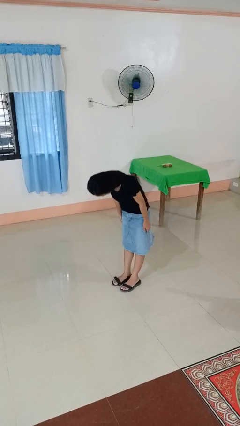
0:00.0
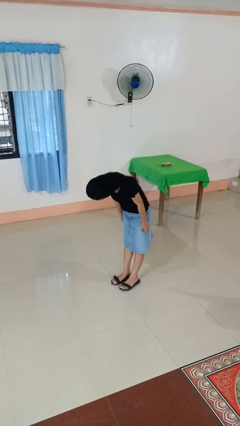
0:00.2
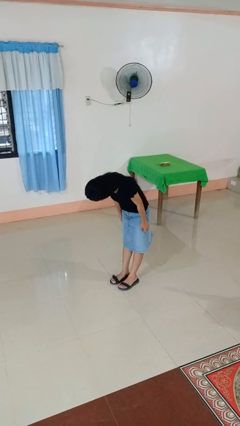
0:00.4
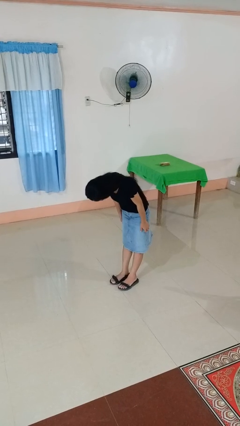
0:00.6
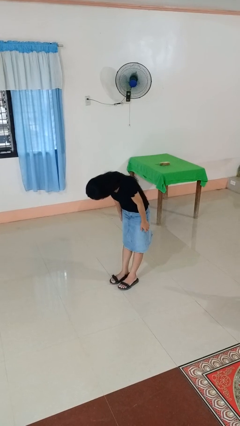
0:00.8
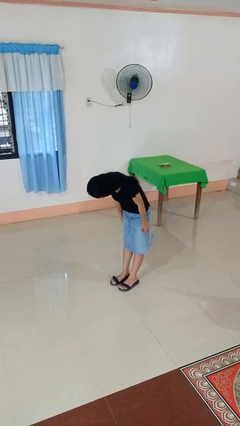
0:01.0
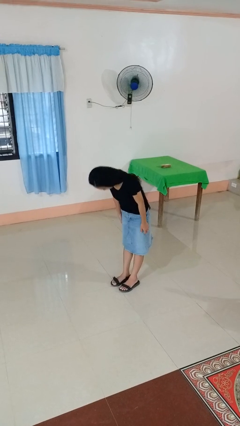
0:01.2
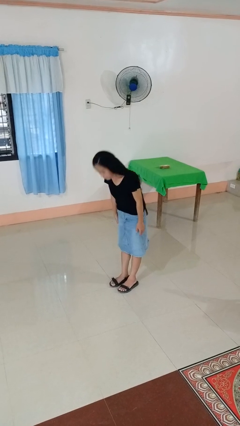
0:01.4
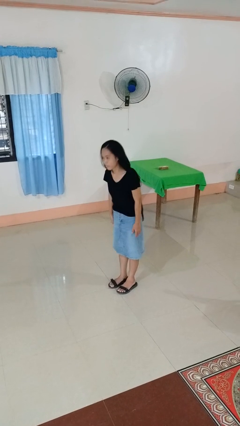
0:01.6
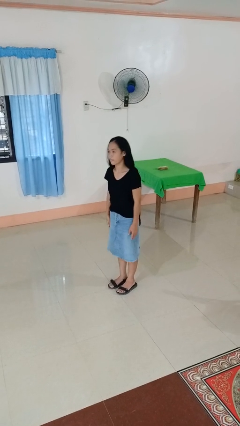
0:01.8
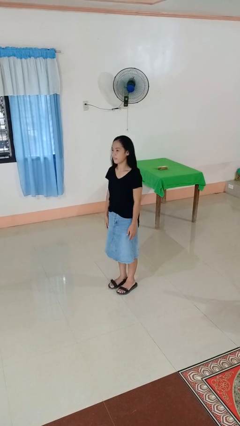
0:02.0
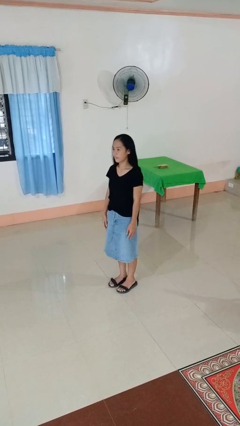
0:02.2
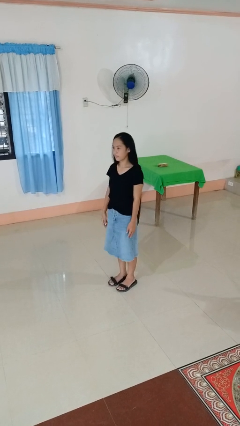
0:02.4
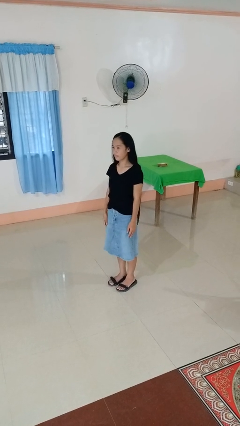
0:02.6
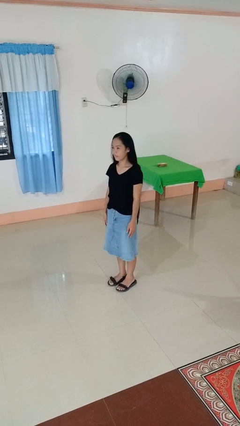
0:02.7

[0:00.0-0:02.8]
person bows

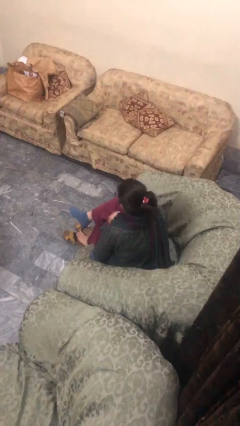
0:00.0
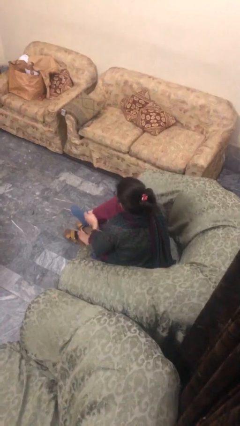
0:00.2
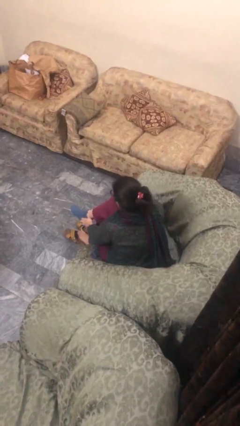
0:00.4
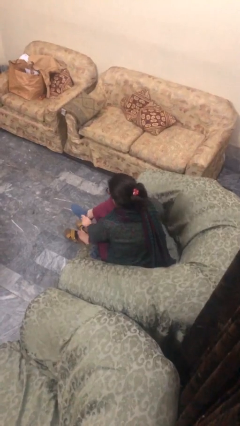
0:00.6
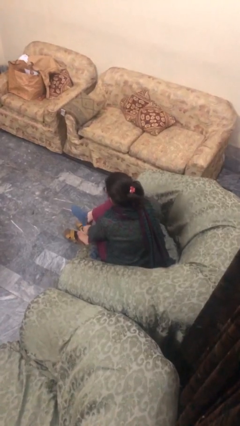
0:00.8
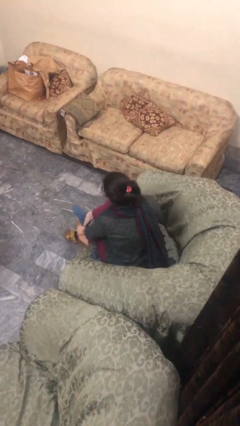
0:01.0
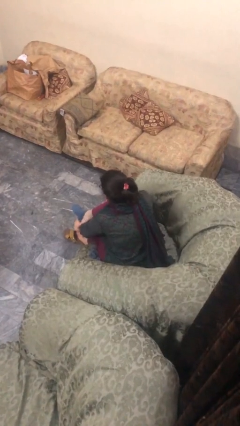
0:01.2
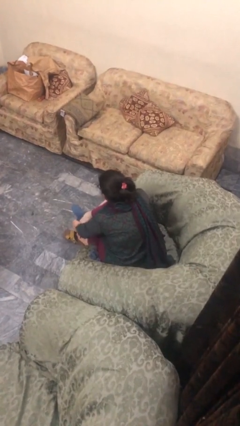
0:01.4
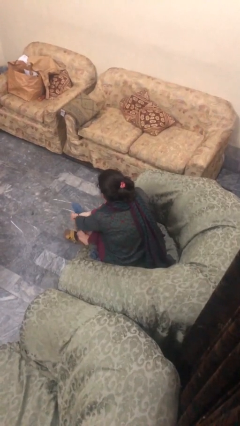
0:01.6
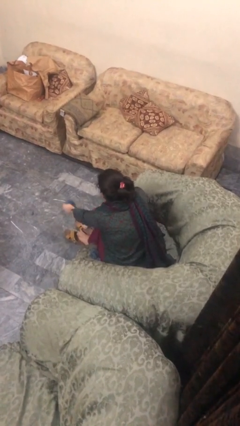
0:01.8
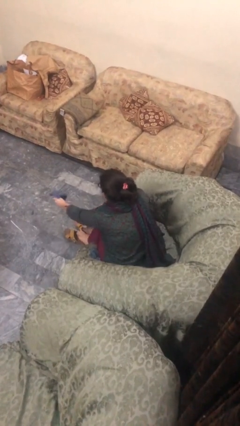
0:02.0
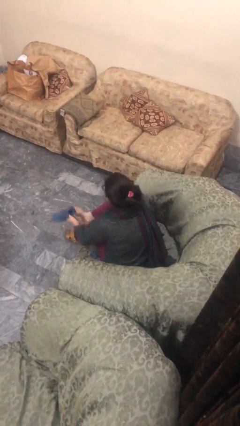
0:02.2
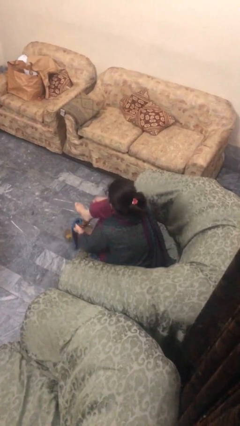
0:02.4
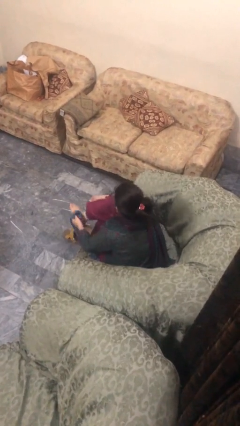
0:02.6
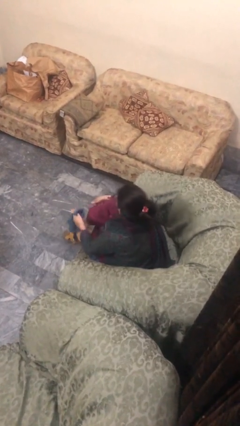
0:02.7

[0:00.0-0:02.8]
person takes off socks

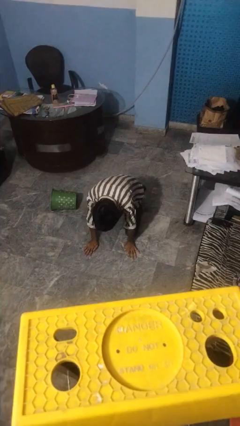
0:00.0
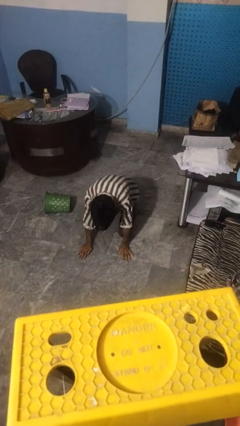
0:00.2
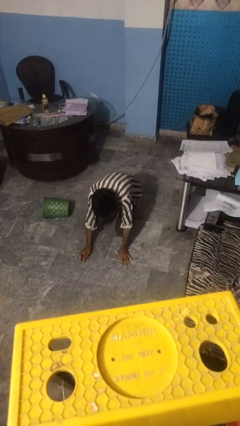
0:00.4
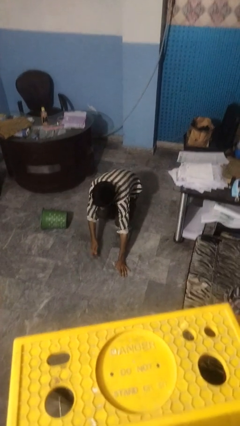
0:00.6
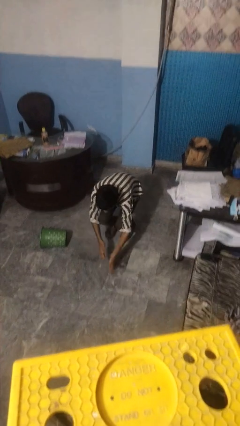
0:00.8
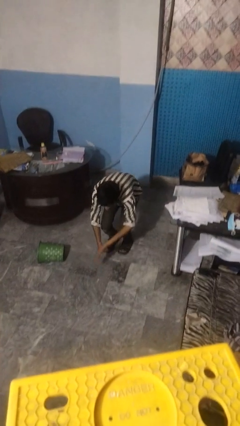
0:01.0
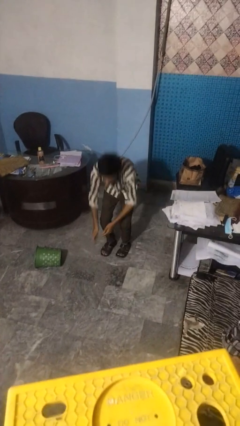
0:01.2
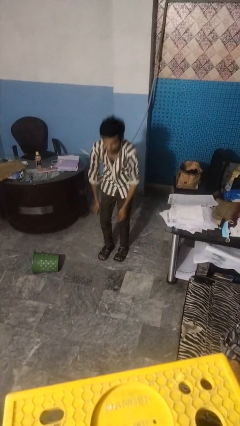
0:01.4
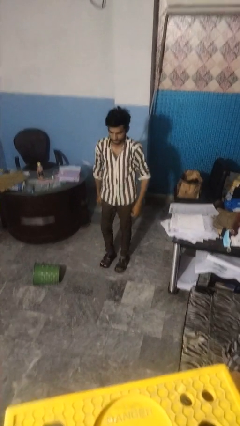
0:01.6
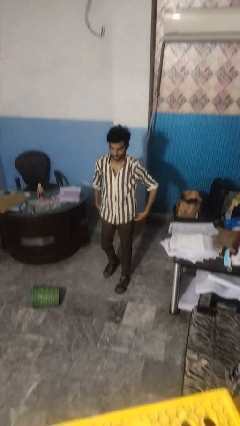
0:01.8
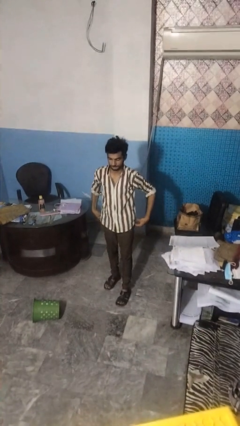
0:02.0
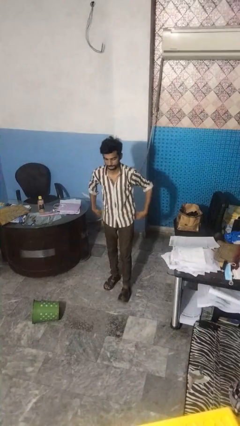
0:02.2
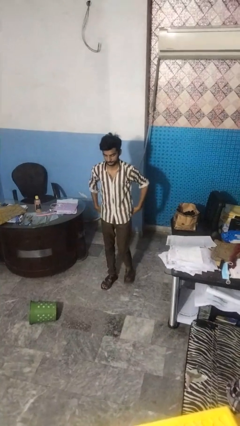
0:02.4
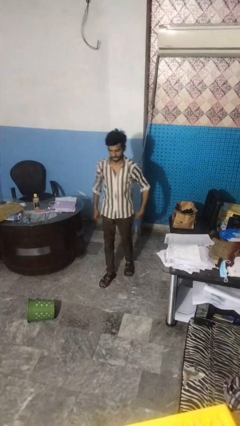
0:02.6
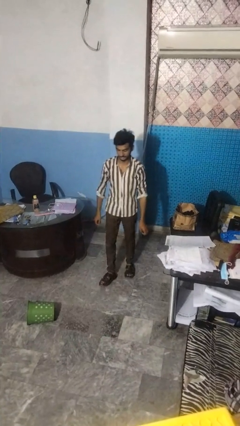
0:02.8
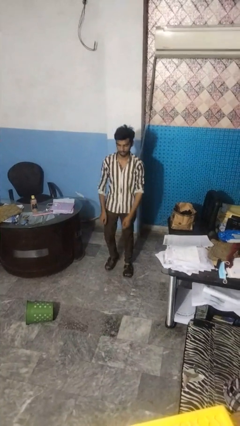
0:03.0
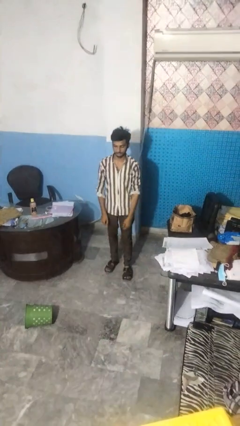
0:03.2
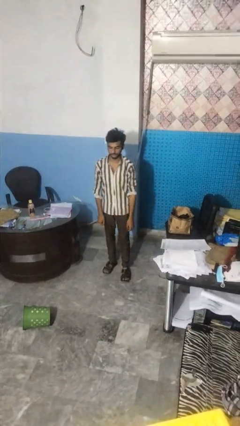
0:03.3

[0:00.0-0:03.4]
person stands up from floor

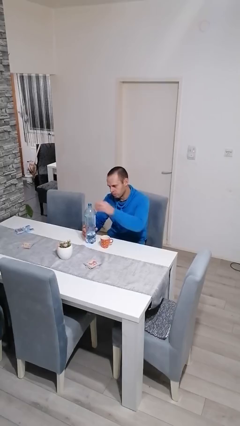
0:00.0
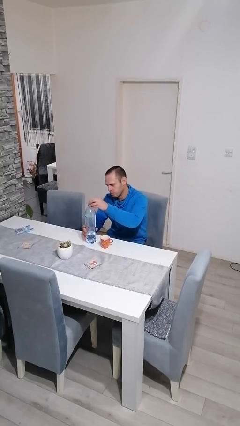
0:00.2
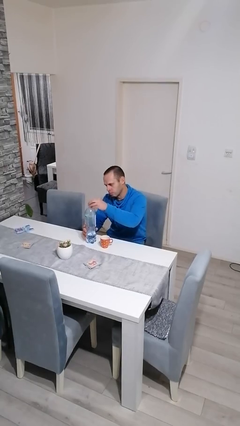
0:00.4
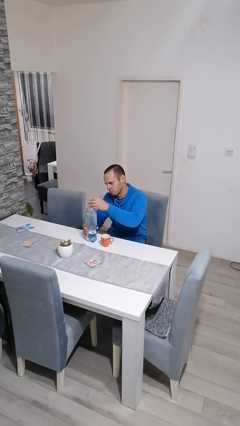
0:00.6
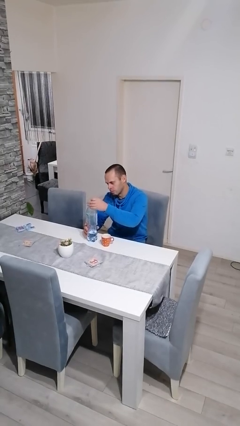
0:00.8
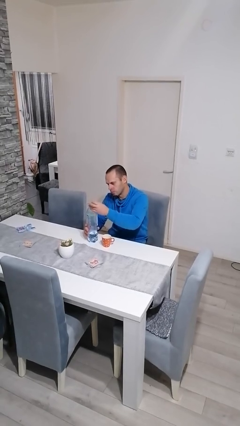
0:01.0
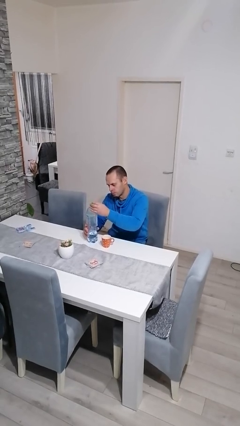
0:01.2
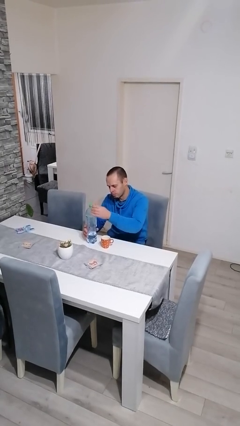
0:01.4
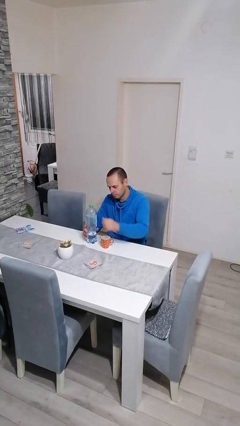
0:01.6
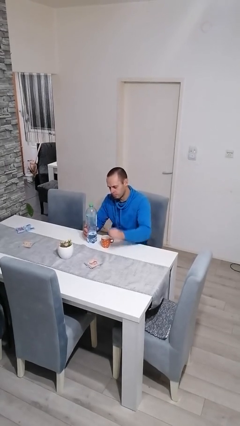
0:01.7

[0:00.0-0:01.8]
person screws lid to bottle

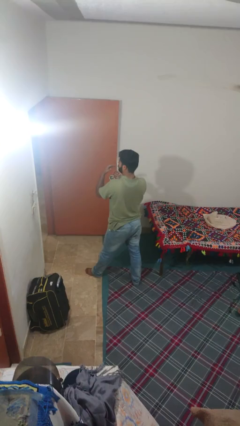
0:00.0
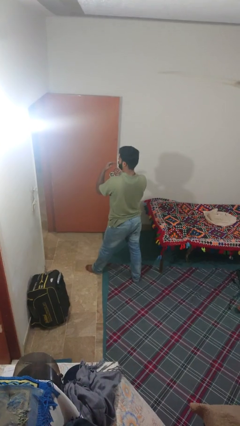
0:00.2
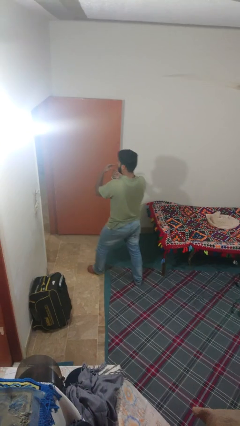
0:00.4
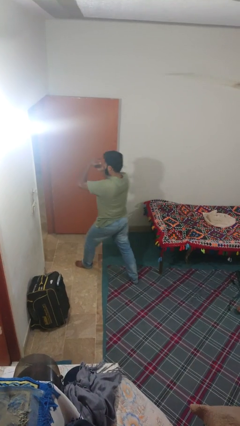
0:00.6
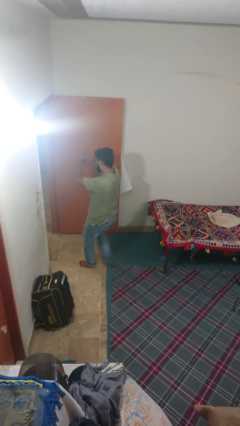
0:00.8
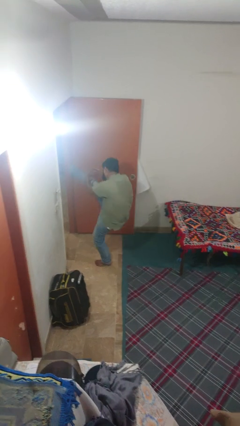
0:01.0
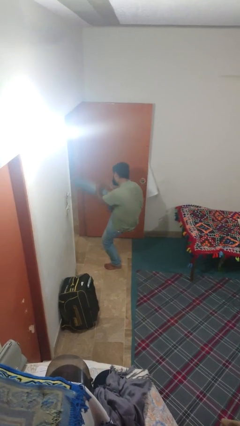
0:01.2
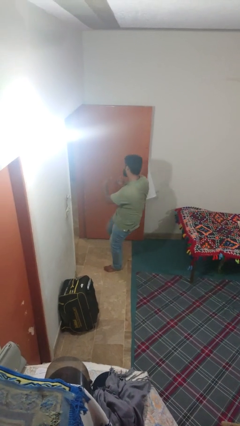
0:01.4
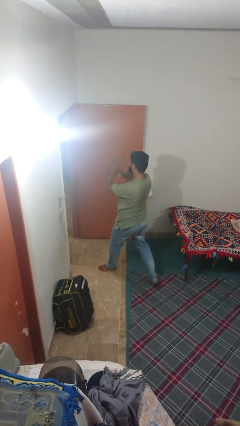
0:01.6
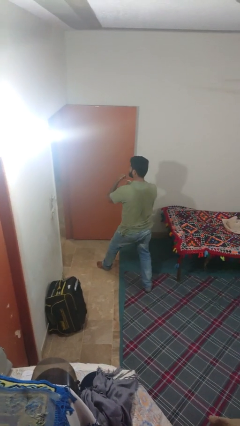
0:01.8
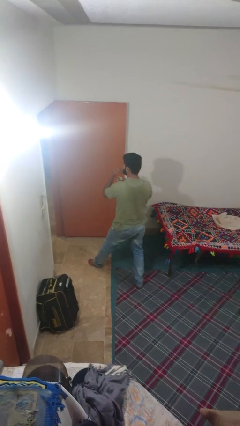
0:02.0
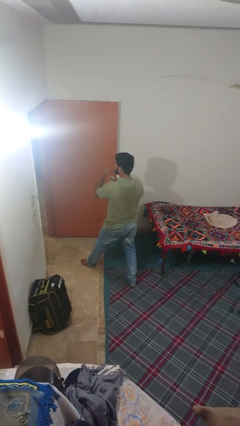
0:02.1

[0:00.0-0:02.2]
person karate kicks

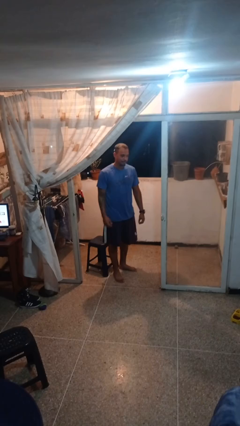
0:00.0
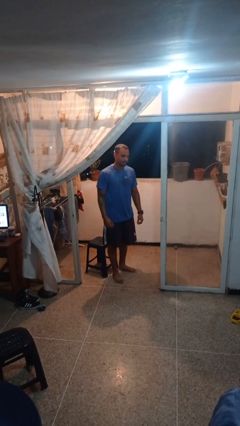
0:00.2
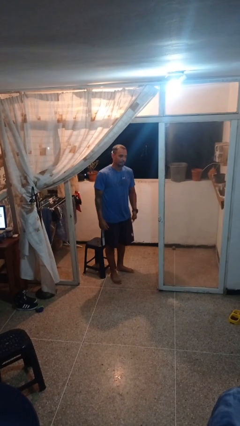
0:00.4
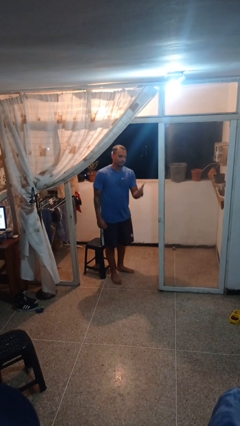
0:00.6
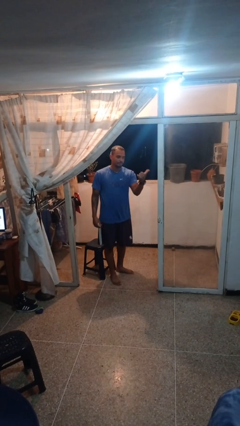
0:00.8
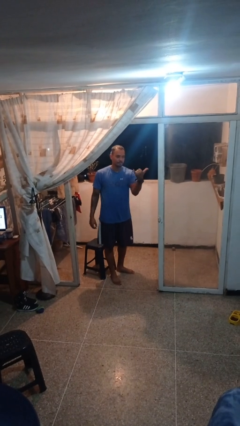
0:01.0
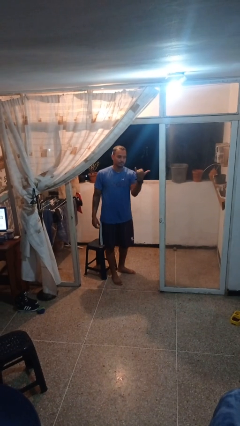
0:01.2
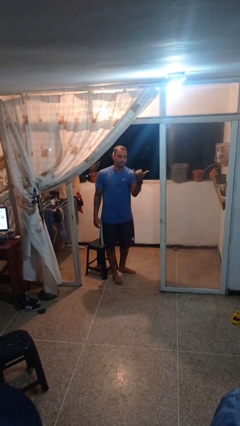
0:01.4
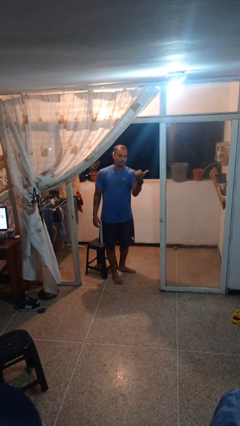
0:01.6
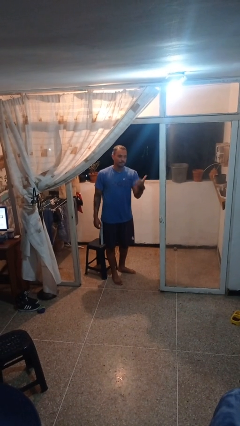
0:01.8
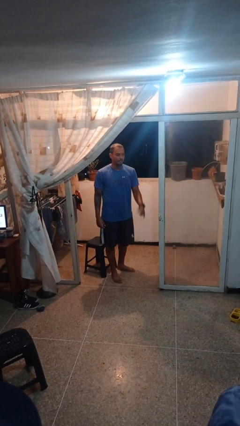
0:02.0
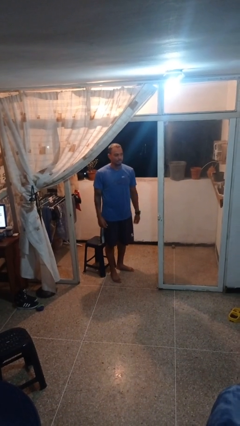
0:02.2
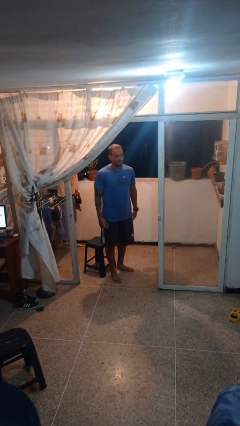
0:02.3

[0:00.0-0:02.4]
person gestures hang loose

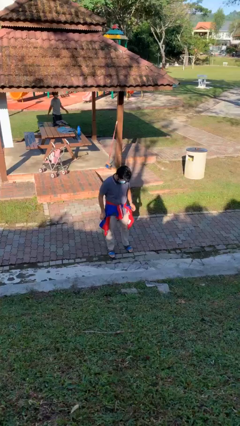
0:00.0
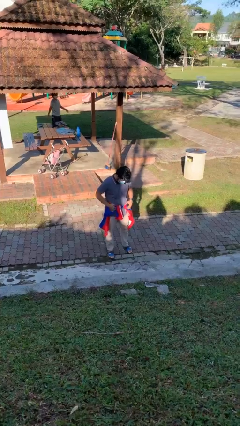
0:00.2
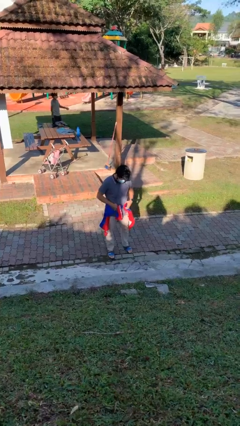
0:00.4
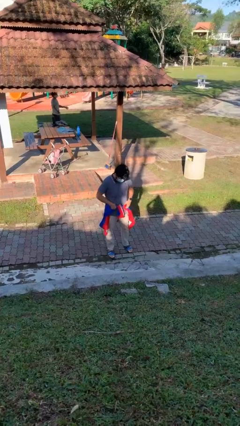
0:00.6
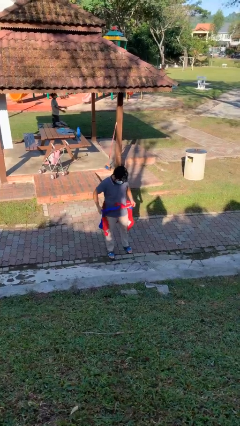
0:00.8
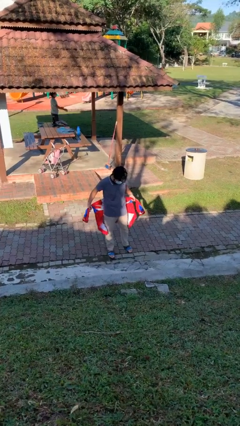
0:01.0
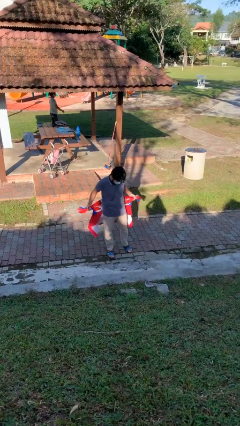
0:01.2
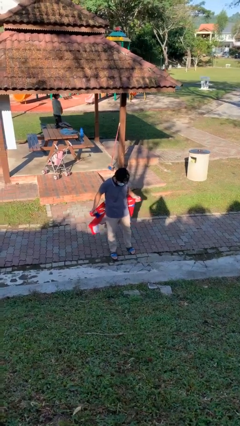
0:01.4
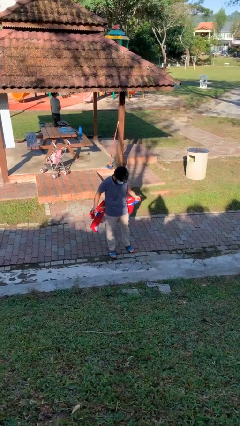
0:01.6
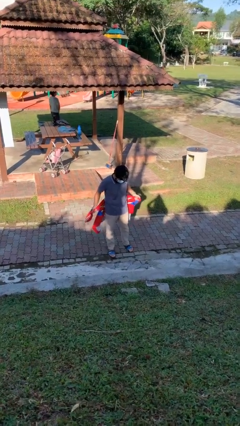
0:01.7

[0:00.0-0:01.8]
person unties jacket around waist
